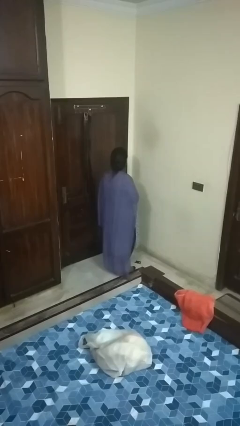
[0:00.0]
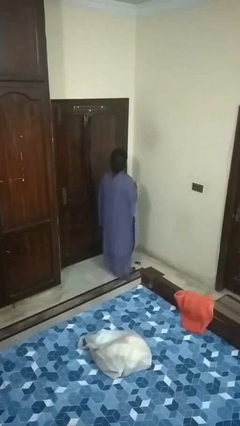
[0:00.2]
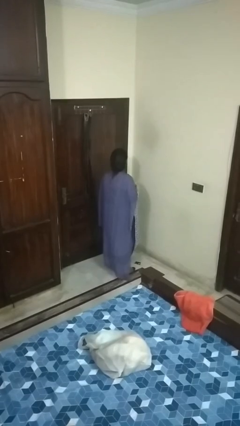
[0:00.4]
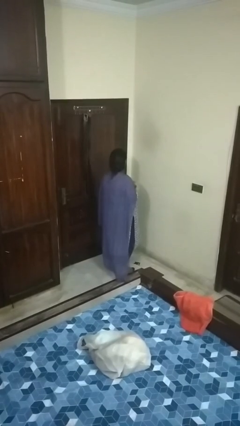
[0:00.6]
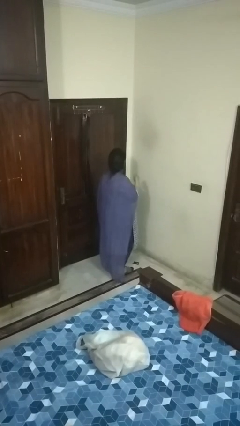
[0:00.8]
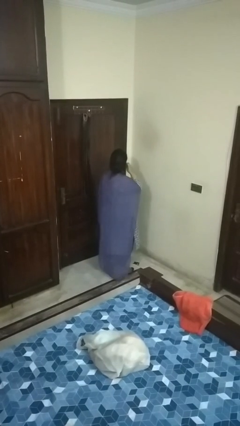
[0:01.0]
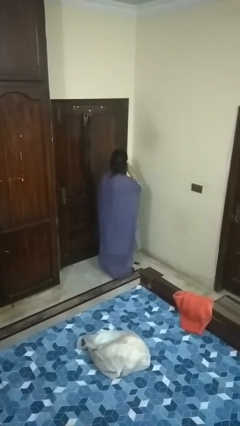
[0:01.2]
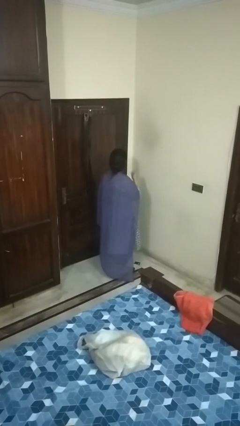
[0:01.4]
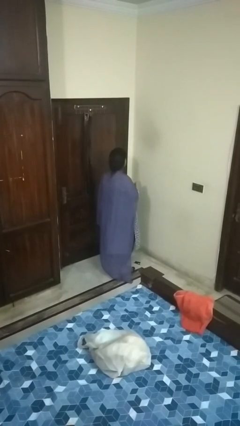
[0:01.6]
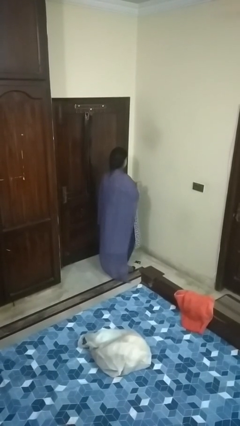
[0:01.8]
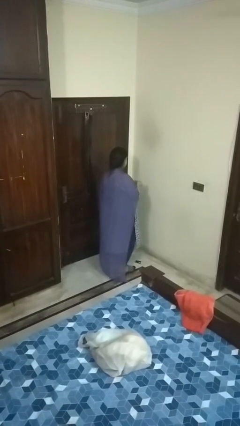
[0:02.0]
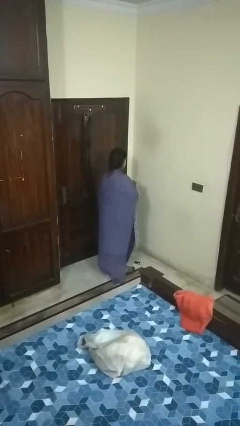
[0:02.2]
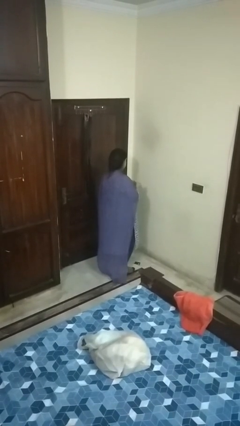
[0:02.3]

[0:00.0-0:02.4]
person takes off earrings

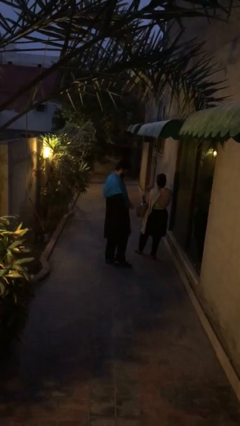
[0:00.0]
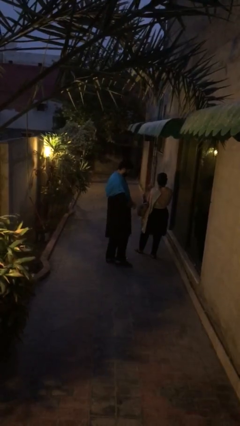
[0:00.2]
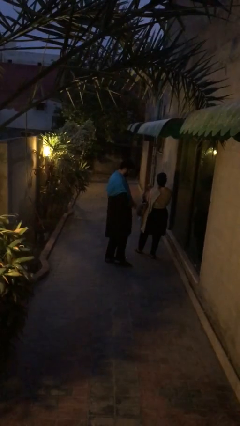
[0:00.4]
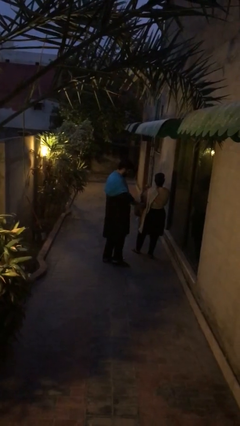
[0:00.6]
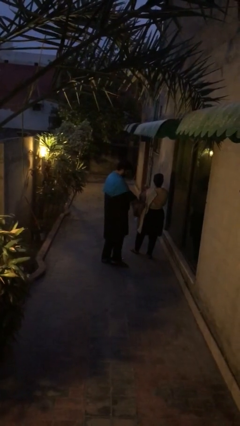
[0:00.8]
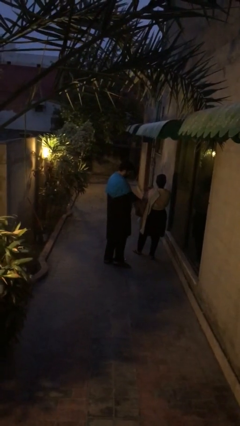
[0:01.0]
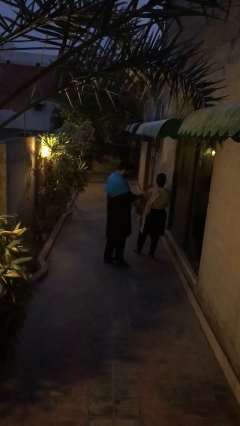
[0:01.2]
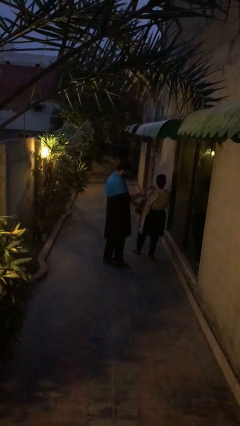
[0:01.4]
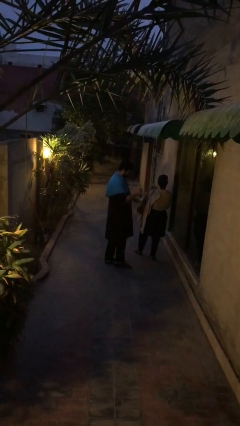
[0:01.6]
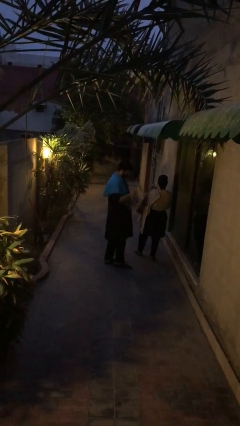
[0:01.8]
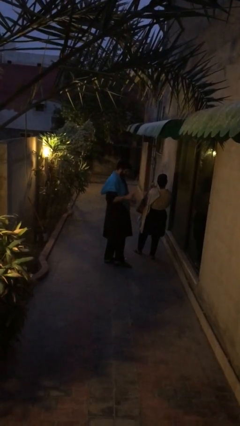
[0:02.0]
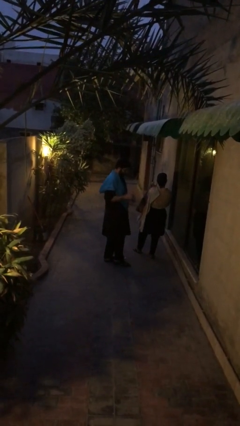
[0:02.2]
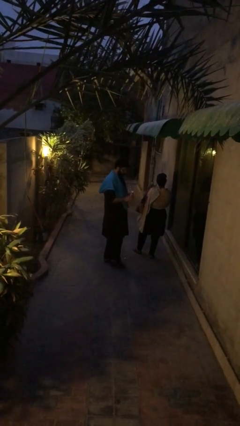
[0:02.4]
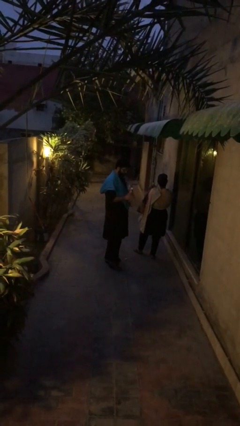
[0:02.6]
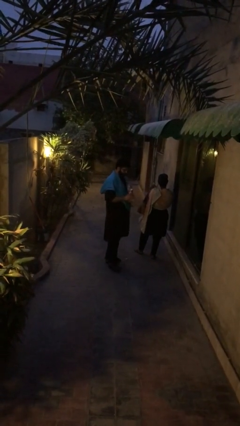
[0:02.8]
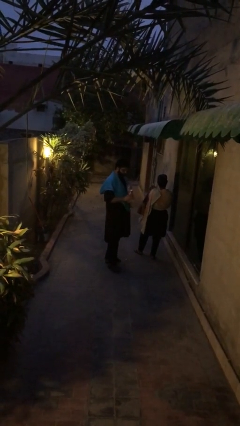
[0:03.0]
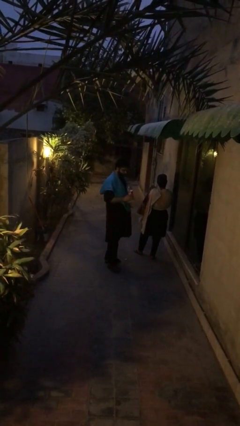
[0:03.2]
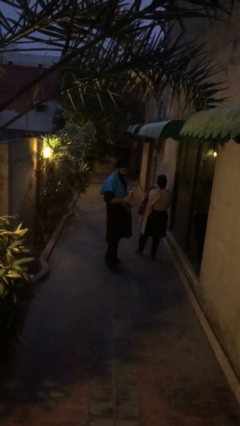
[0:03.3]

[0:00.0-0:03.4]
person steals object from person

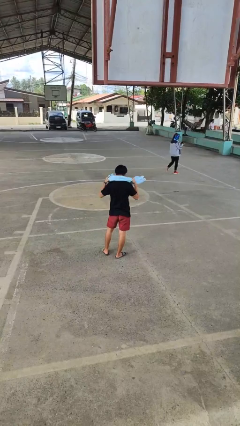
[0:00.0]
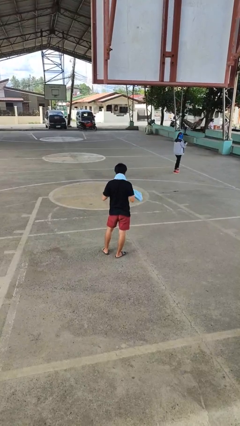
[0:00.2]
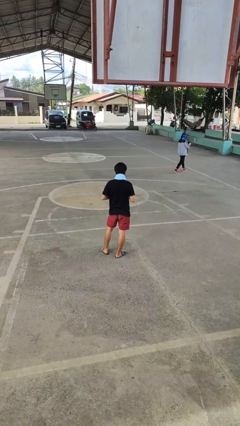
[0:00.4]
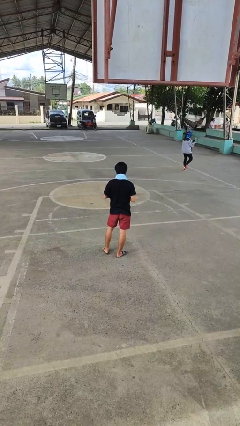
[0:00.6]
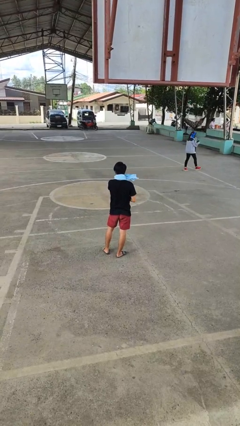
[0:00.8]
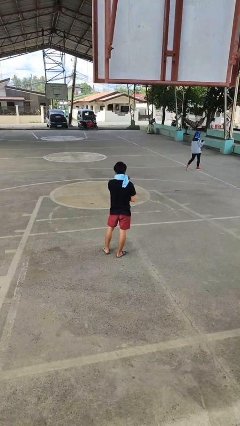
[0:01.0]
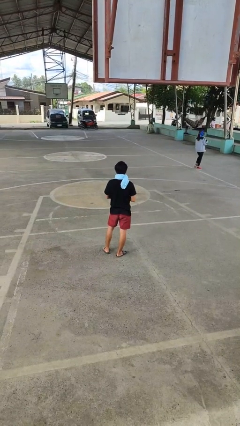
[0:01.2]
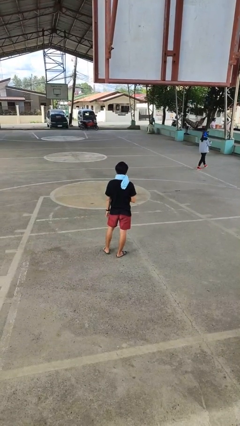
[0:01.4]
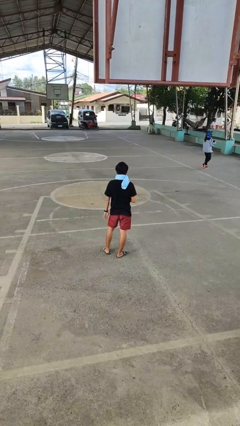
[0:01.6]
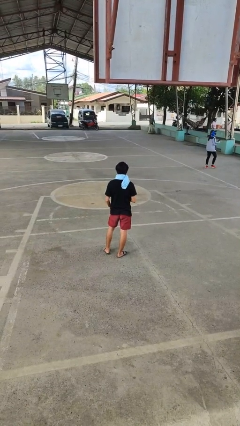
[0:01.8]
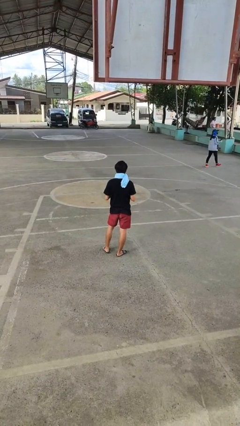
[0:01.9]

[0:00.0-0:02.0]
person puts on scarf

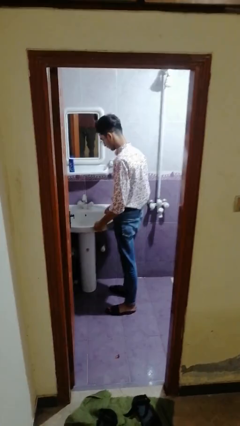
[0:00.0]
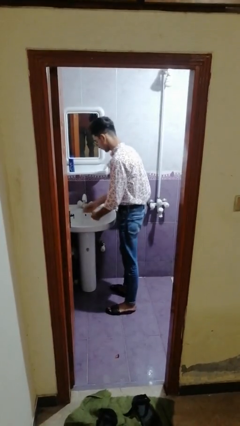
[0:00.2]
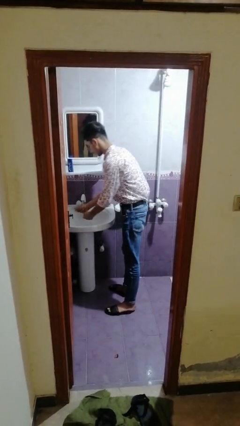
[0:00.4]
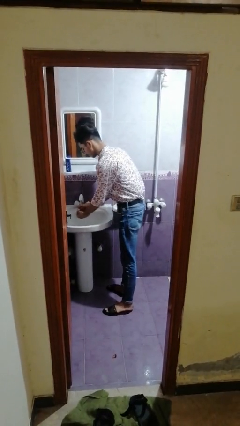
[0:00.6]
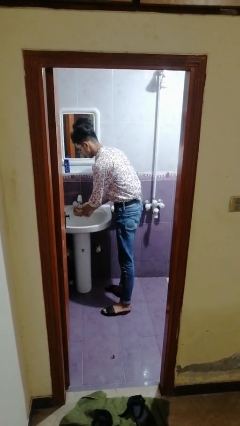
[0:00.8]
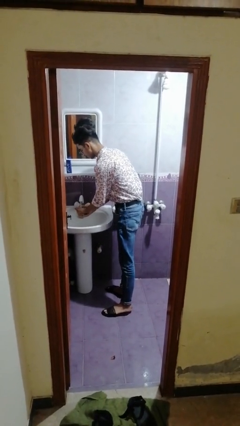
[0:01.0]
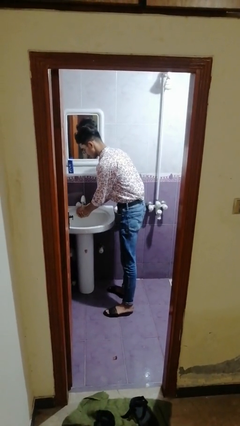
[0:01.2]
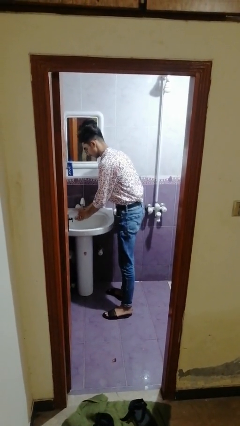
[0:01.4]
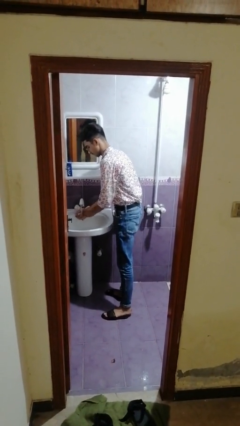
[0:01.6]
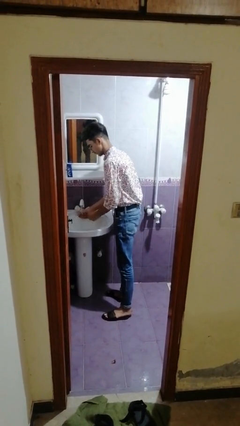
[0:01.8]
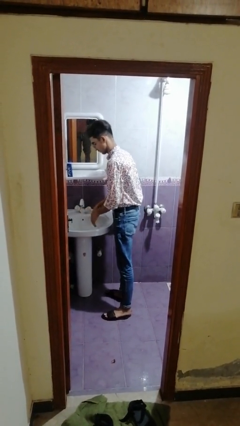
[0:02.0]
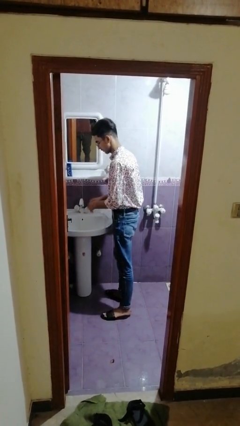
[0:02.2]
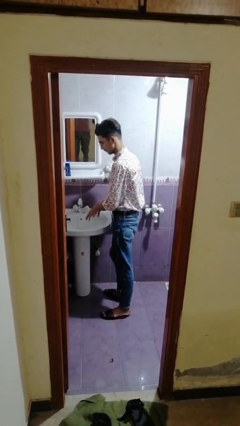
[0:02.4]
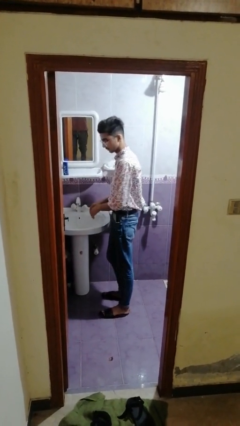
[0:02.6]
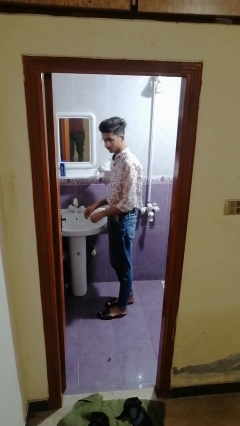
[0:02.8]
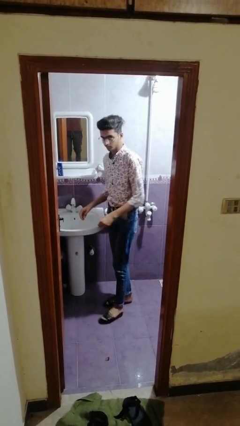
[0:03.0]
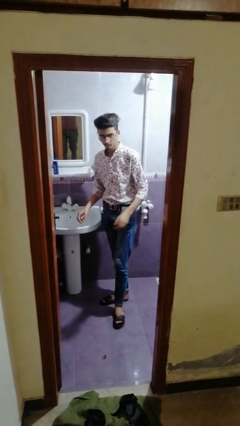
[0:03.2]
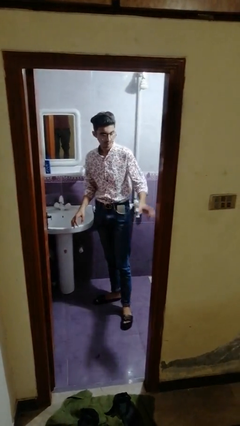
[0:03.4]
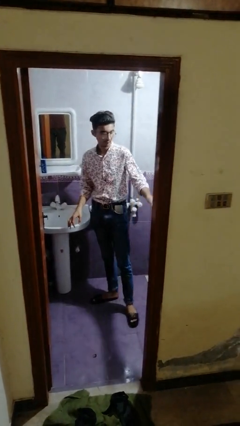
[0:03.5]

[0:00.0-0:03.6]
person washes hands

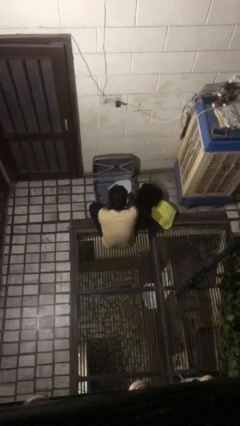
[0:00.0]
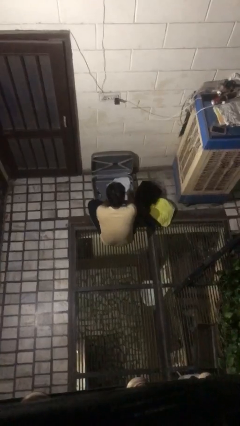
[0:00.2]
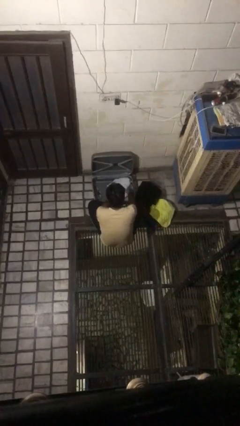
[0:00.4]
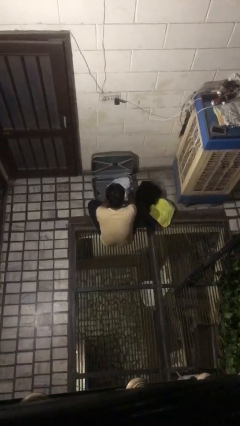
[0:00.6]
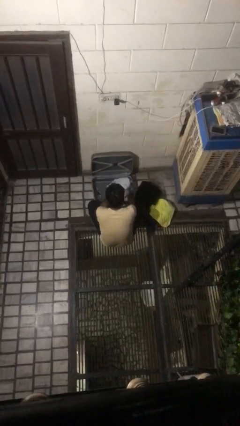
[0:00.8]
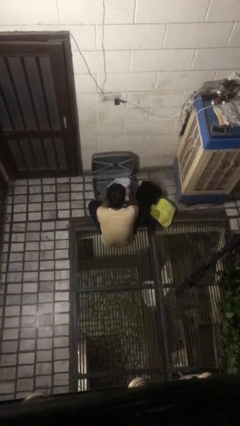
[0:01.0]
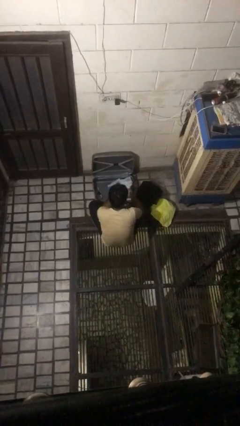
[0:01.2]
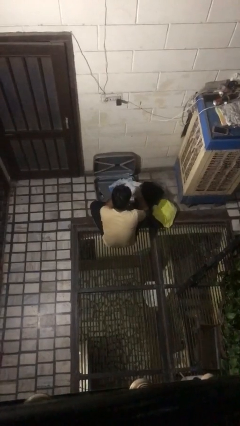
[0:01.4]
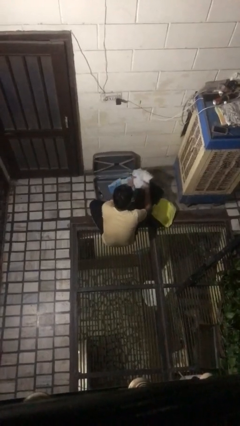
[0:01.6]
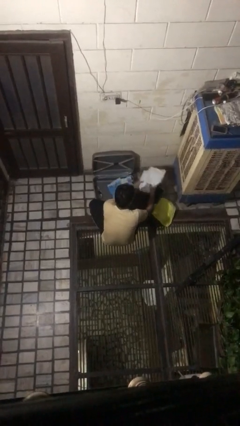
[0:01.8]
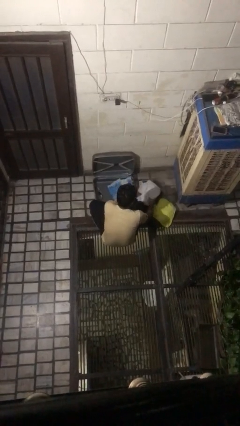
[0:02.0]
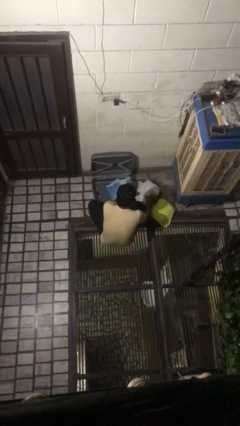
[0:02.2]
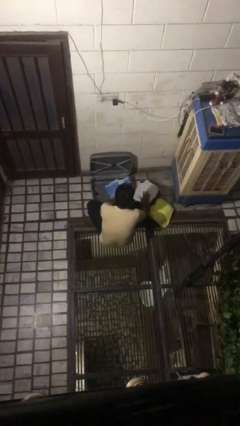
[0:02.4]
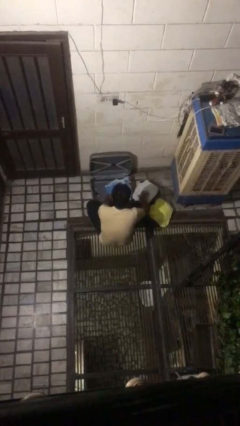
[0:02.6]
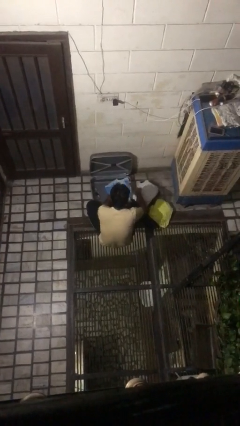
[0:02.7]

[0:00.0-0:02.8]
person unloads clothes from suitcase

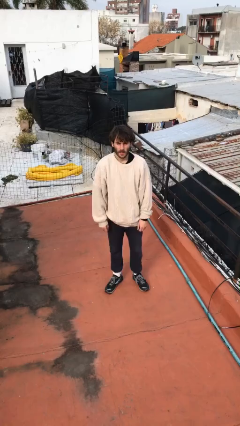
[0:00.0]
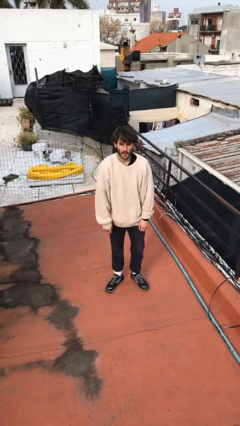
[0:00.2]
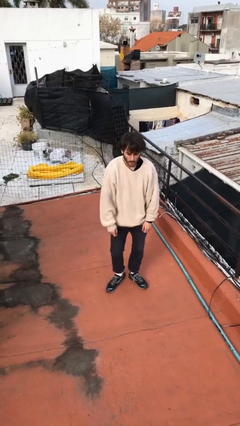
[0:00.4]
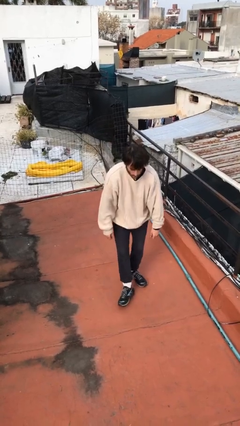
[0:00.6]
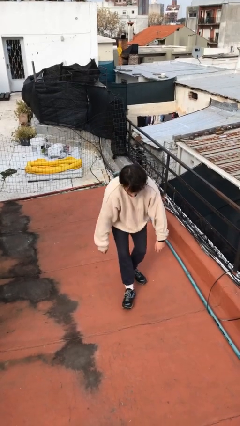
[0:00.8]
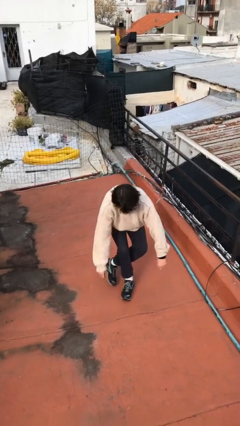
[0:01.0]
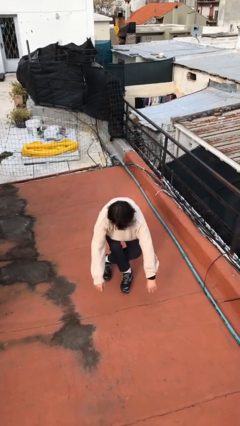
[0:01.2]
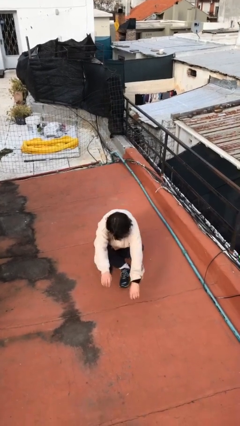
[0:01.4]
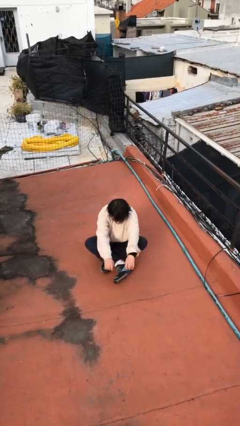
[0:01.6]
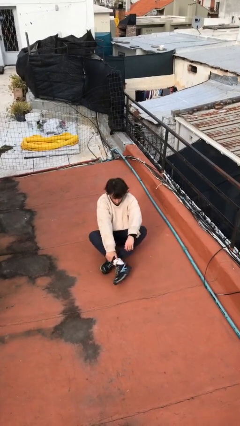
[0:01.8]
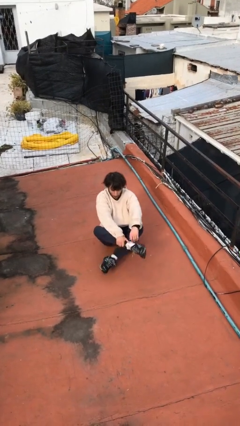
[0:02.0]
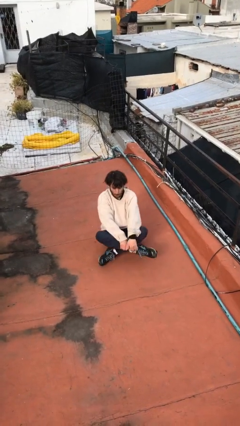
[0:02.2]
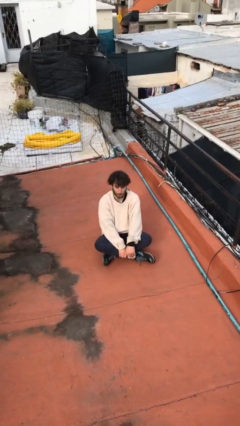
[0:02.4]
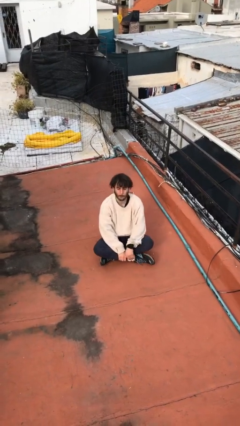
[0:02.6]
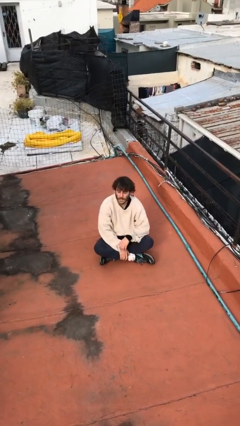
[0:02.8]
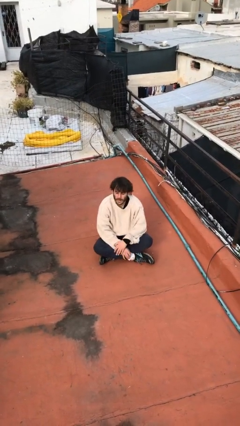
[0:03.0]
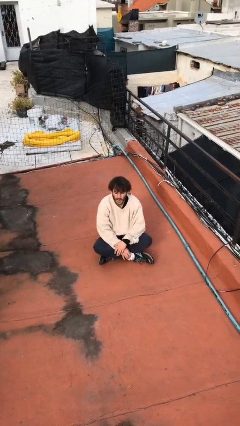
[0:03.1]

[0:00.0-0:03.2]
person sits crisscross
